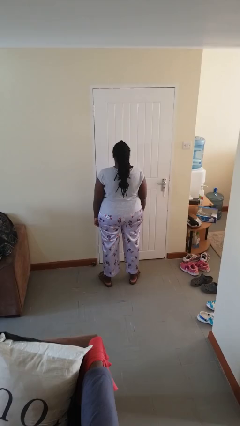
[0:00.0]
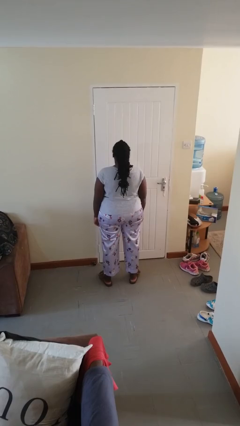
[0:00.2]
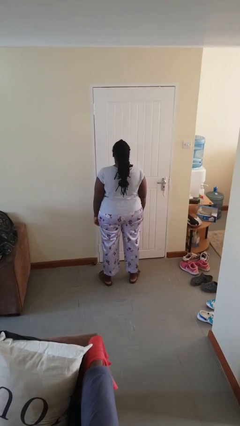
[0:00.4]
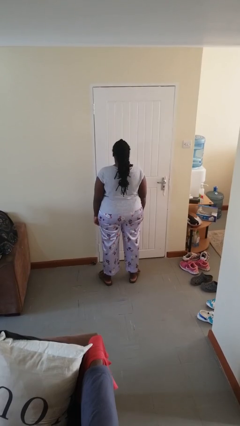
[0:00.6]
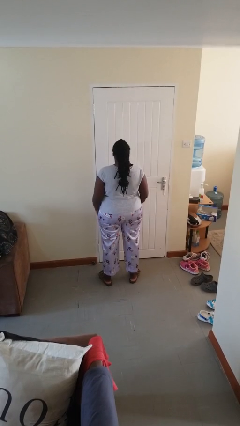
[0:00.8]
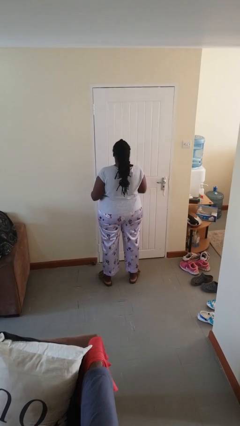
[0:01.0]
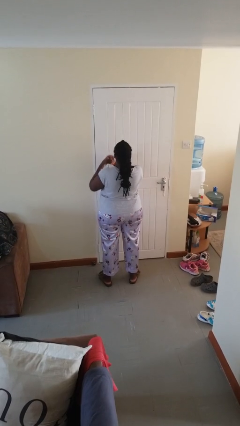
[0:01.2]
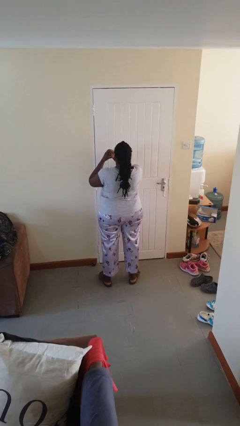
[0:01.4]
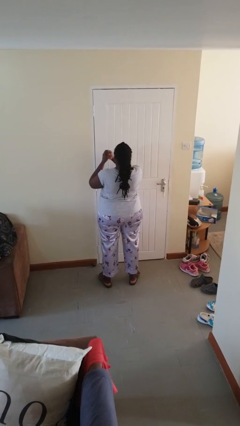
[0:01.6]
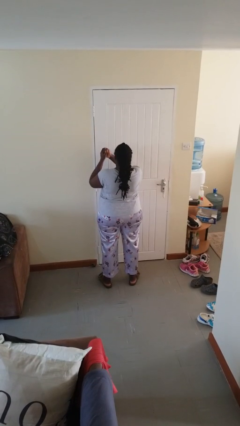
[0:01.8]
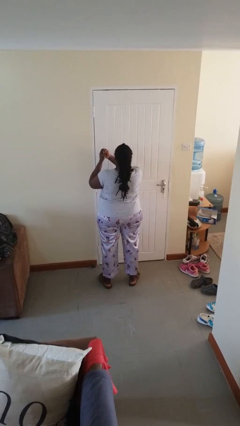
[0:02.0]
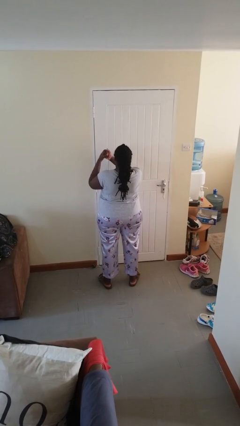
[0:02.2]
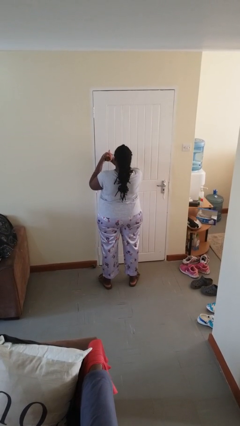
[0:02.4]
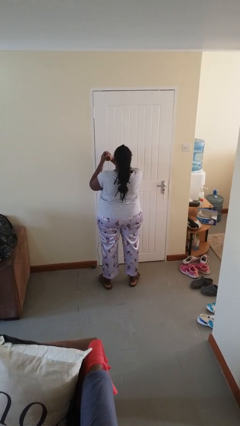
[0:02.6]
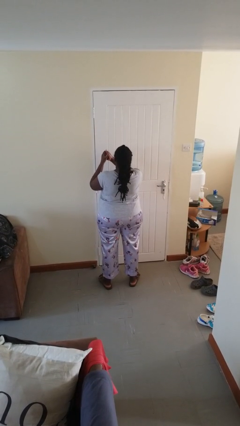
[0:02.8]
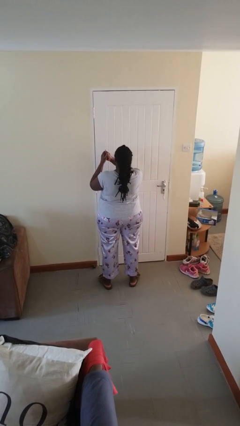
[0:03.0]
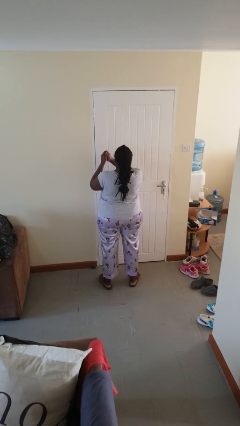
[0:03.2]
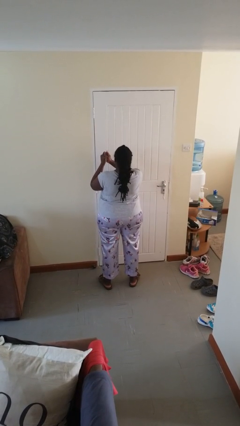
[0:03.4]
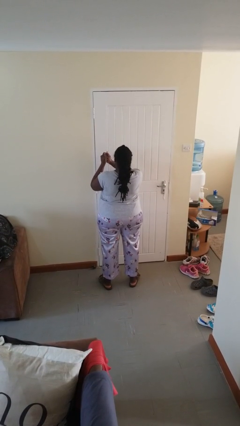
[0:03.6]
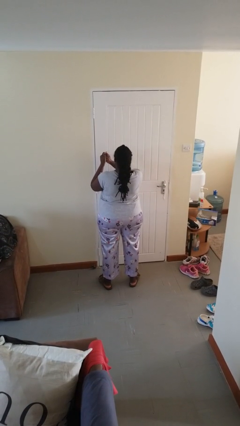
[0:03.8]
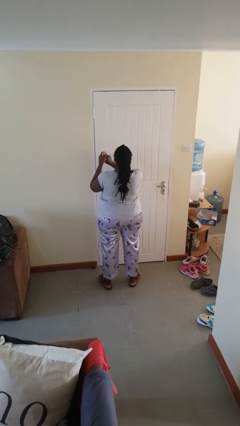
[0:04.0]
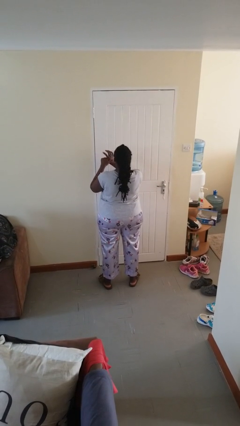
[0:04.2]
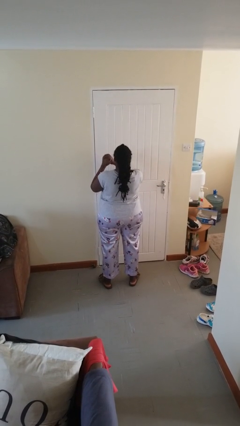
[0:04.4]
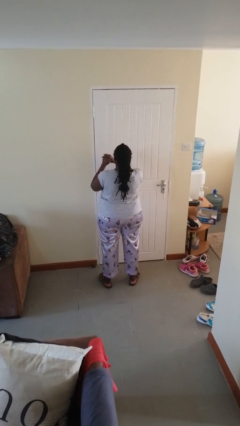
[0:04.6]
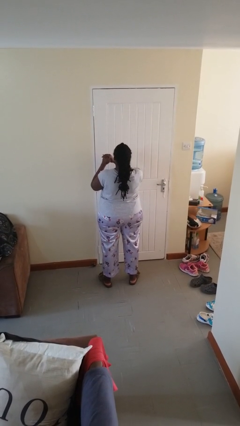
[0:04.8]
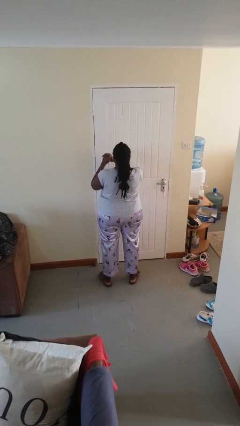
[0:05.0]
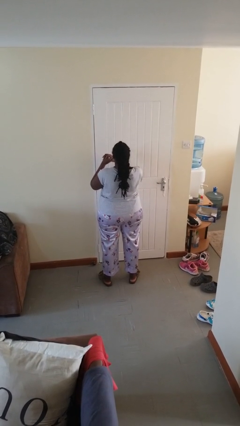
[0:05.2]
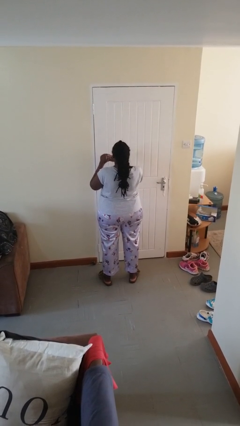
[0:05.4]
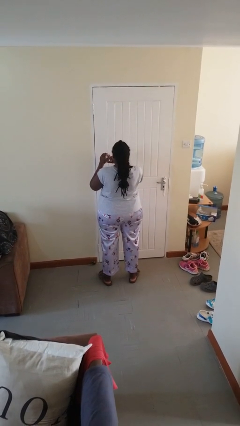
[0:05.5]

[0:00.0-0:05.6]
person cracks knuckles

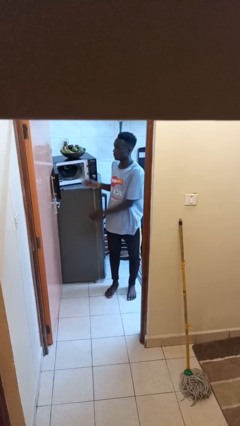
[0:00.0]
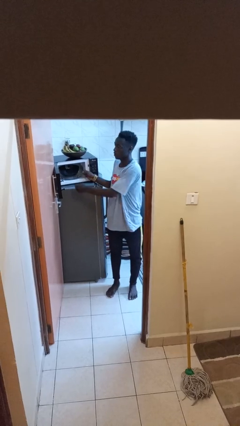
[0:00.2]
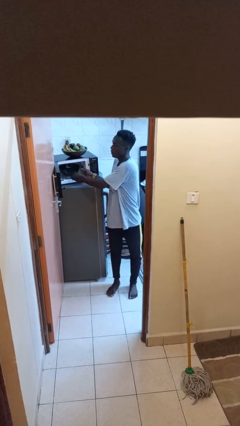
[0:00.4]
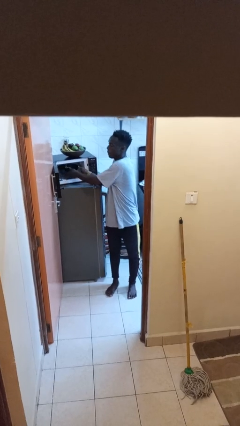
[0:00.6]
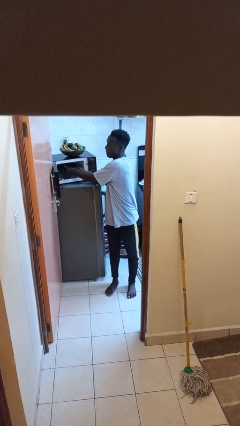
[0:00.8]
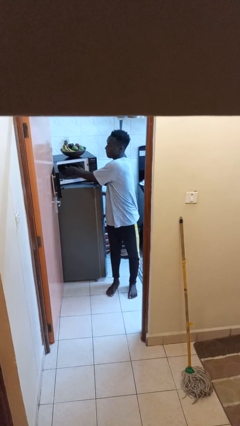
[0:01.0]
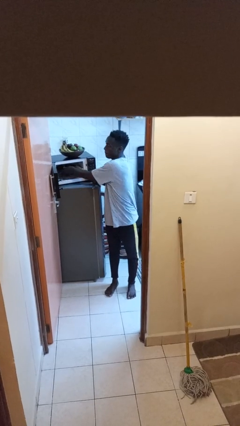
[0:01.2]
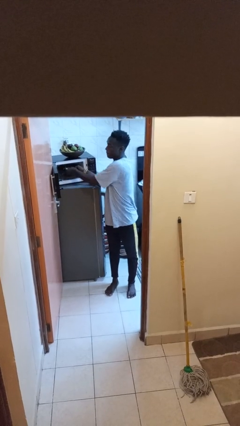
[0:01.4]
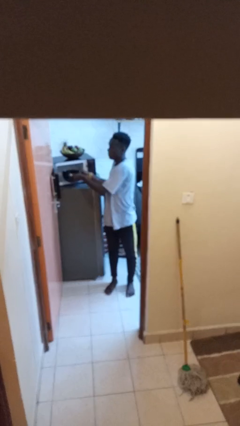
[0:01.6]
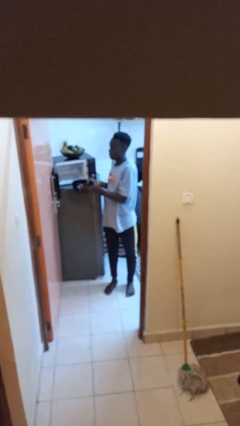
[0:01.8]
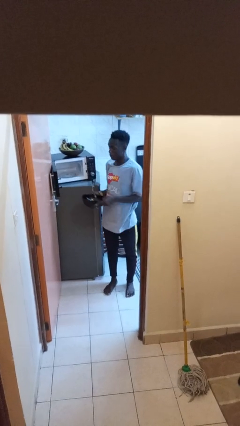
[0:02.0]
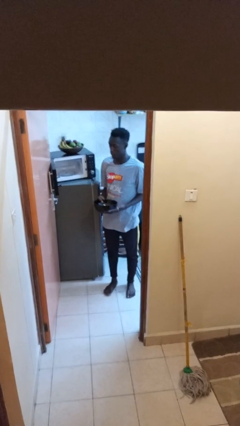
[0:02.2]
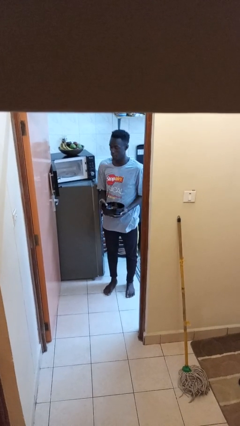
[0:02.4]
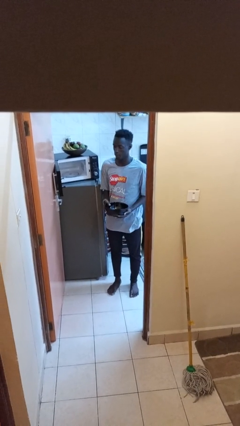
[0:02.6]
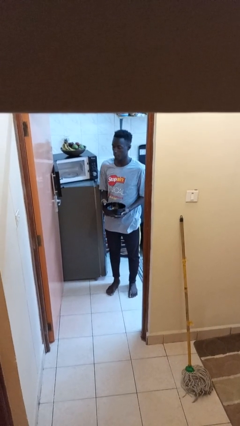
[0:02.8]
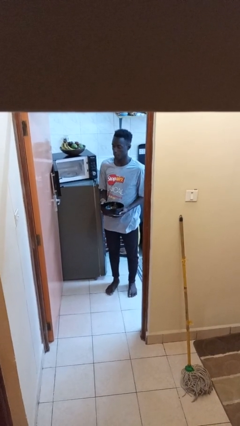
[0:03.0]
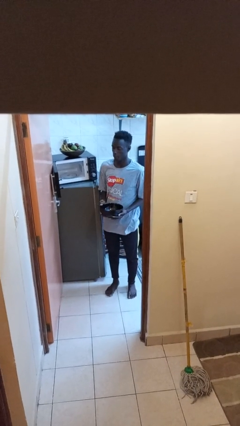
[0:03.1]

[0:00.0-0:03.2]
person takes object from microwave

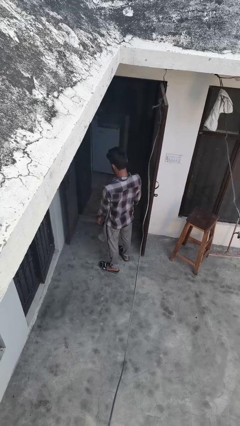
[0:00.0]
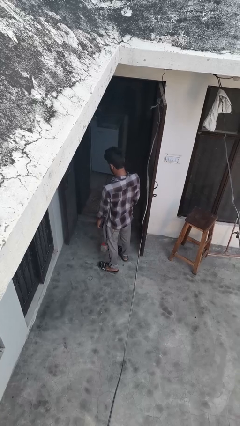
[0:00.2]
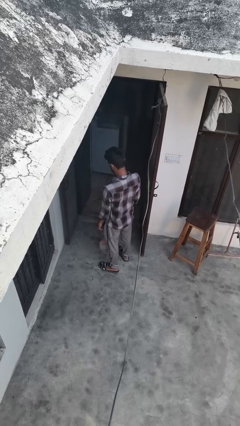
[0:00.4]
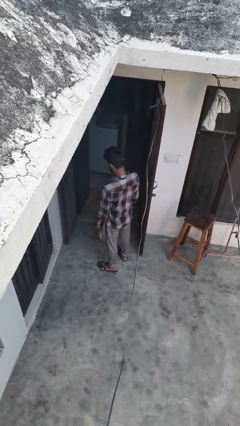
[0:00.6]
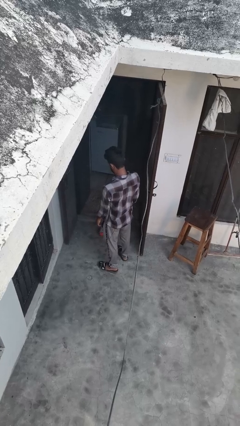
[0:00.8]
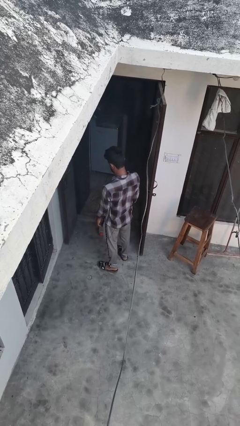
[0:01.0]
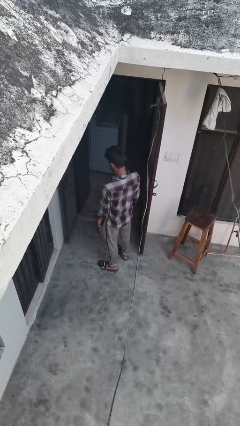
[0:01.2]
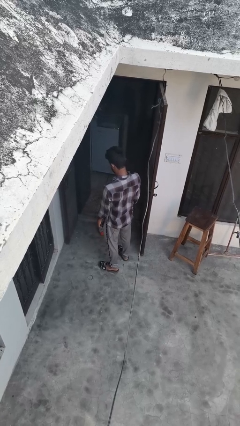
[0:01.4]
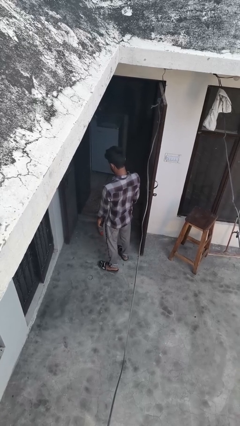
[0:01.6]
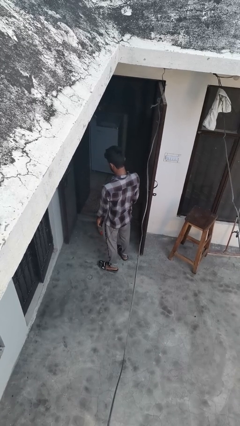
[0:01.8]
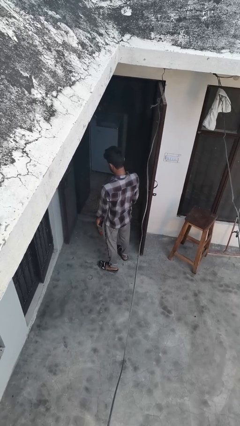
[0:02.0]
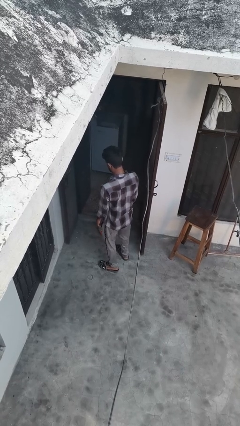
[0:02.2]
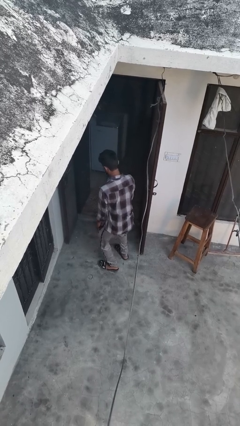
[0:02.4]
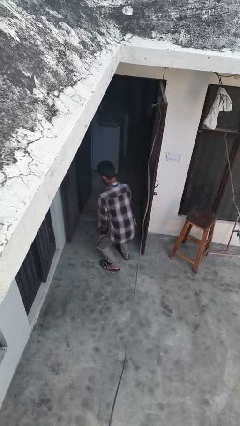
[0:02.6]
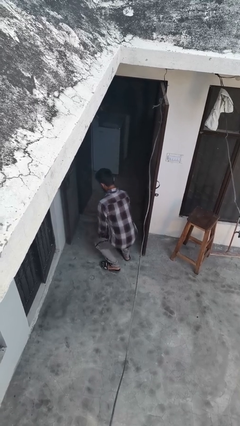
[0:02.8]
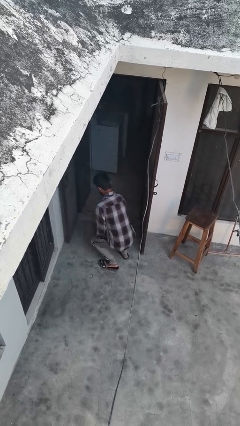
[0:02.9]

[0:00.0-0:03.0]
person drops object

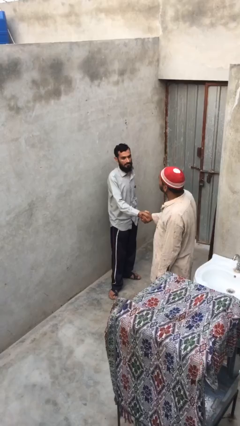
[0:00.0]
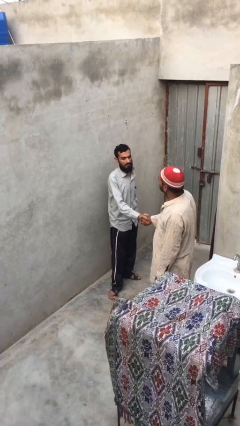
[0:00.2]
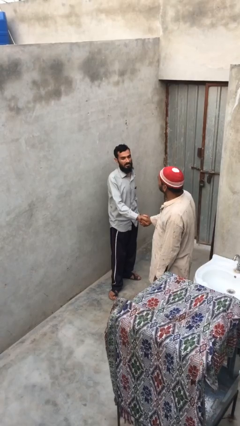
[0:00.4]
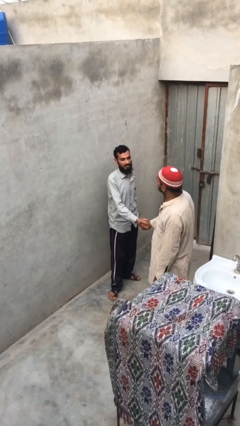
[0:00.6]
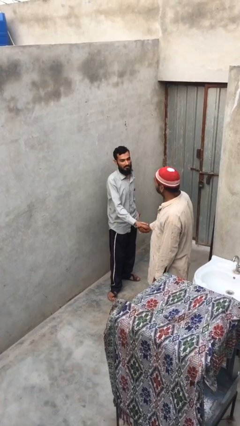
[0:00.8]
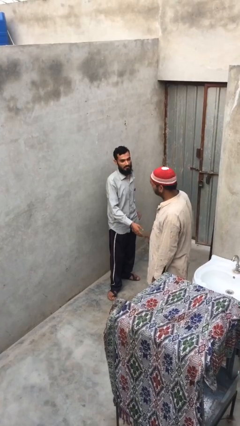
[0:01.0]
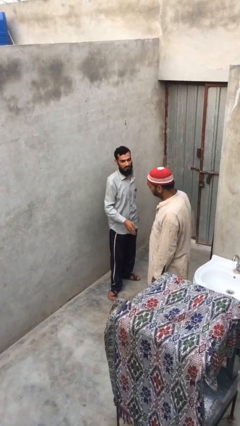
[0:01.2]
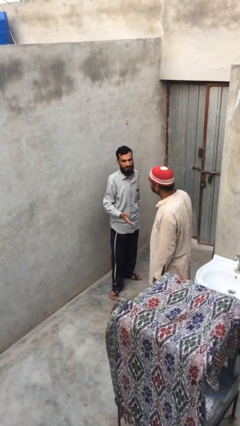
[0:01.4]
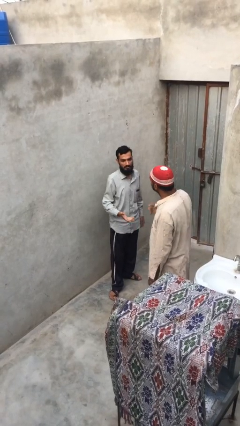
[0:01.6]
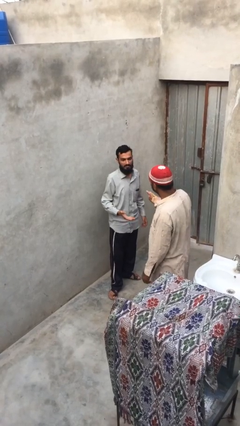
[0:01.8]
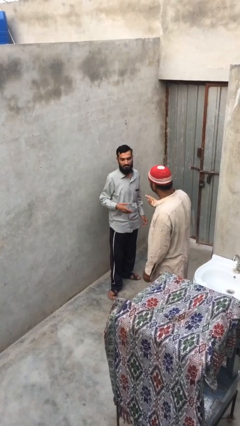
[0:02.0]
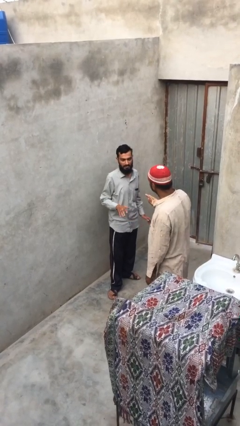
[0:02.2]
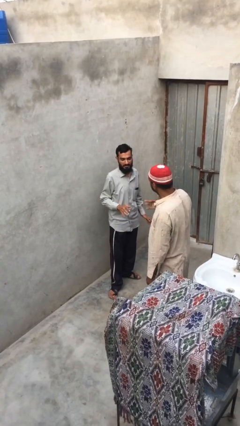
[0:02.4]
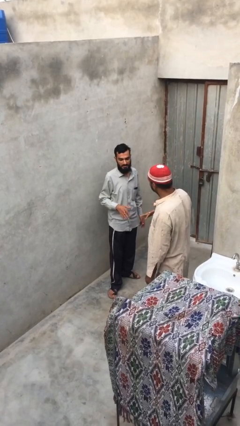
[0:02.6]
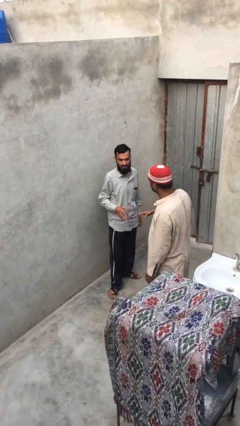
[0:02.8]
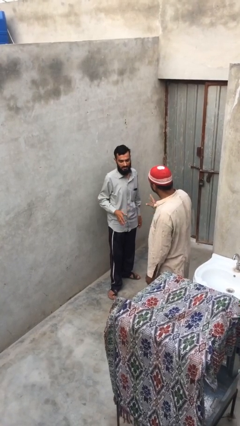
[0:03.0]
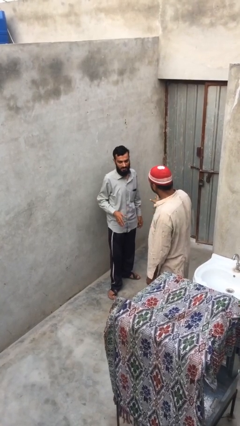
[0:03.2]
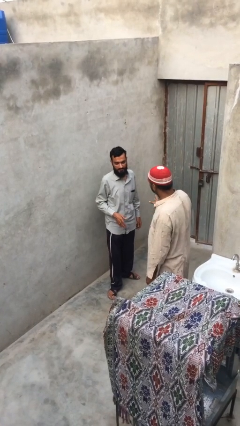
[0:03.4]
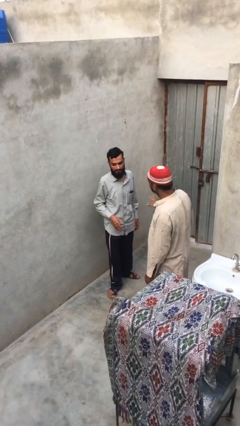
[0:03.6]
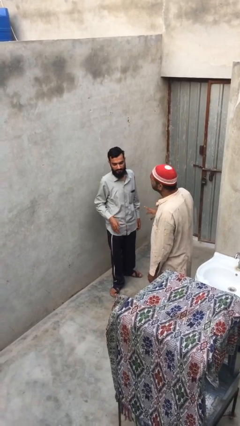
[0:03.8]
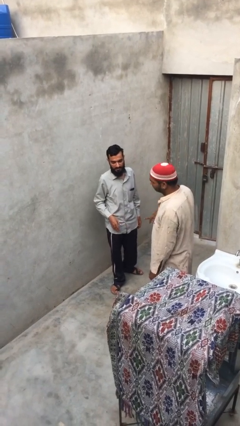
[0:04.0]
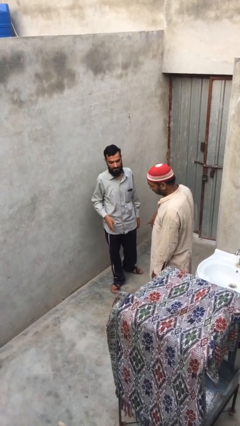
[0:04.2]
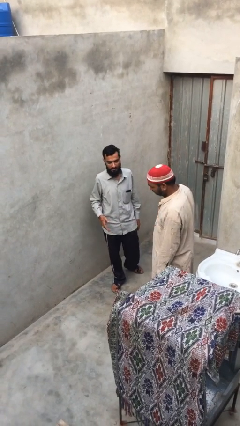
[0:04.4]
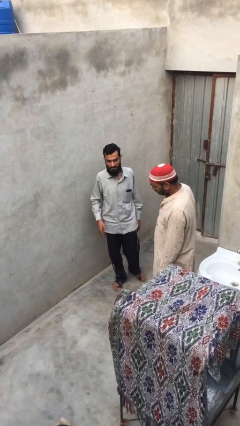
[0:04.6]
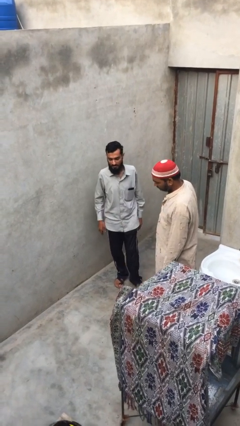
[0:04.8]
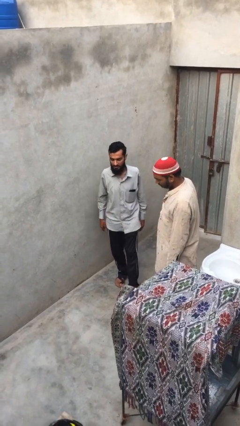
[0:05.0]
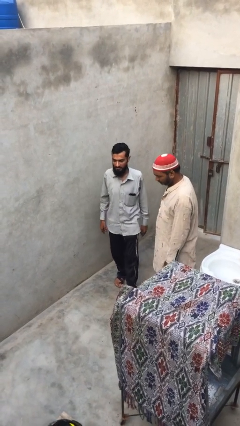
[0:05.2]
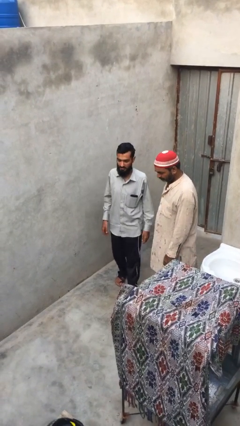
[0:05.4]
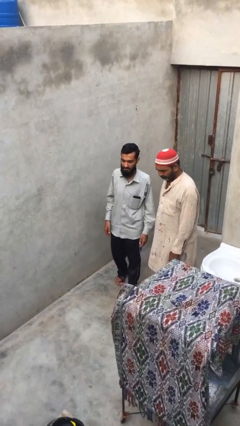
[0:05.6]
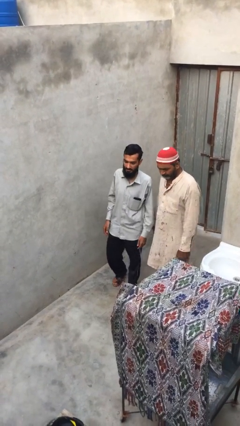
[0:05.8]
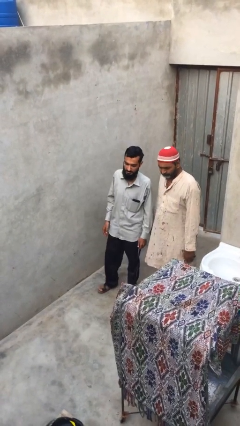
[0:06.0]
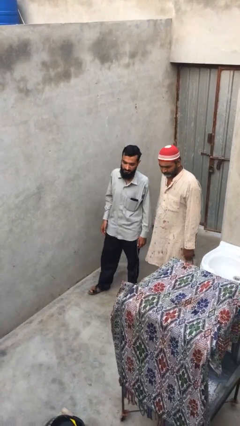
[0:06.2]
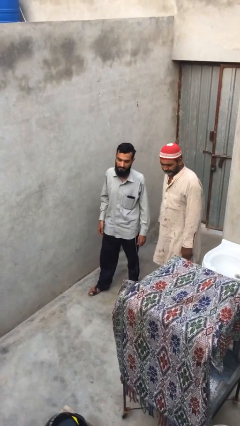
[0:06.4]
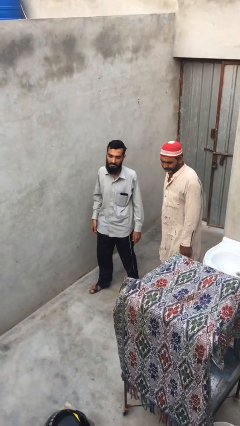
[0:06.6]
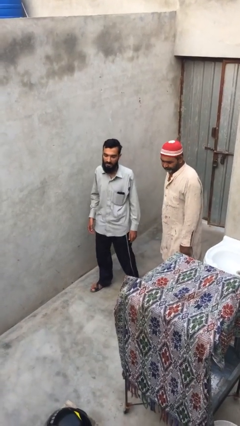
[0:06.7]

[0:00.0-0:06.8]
person talks to person
